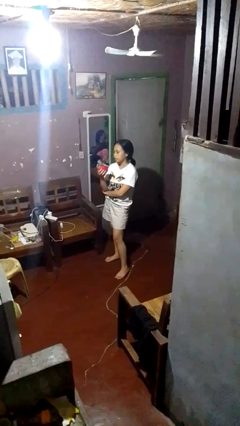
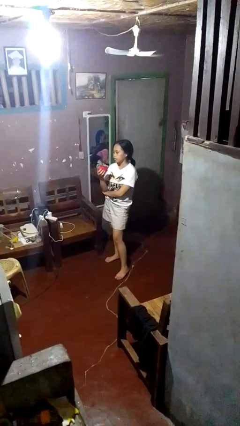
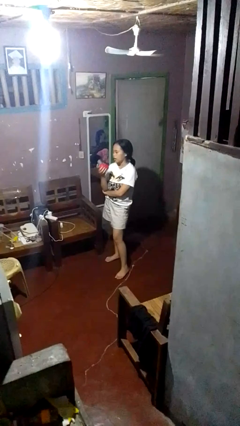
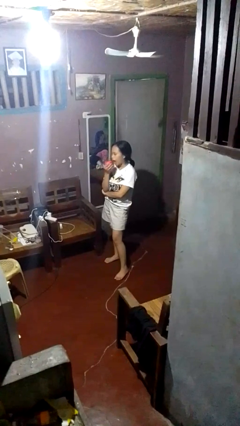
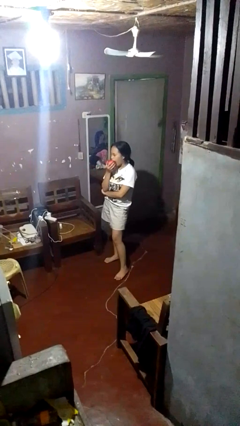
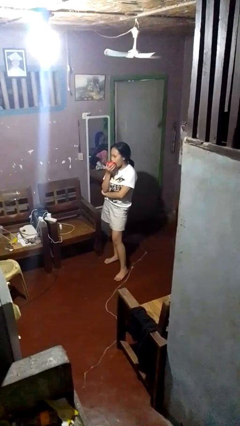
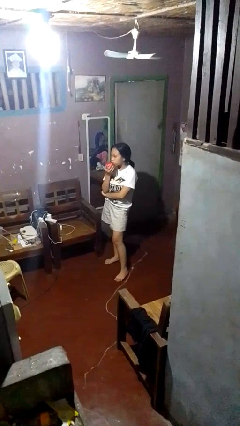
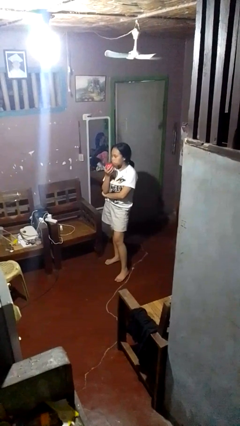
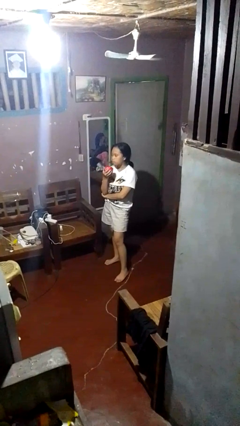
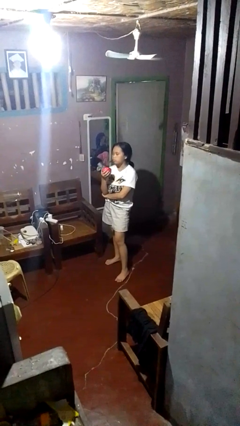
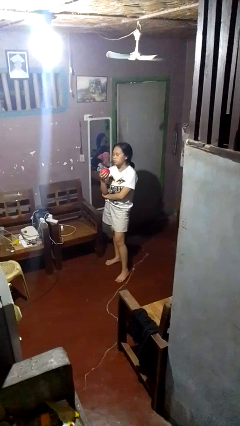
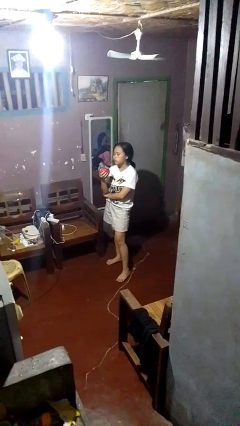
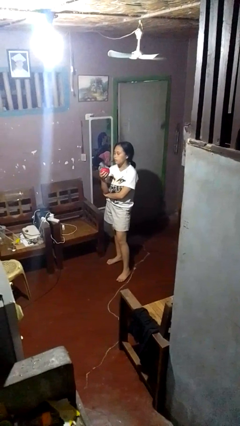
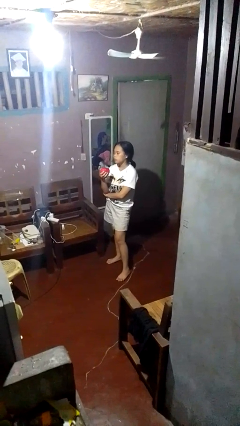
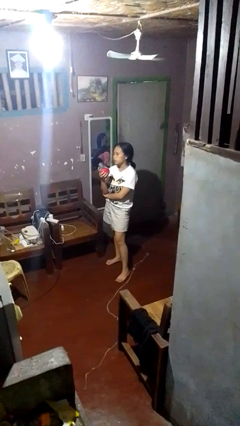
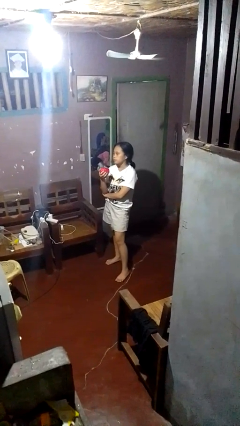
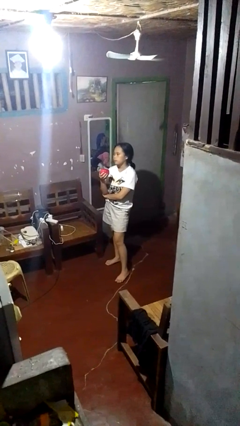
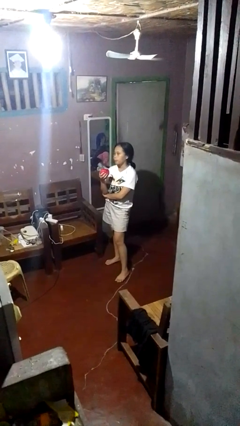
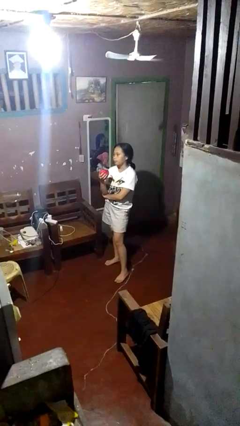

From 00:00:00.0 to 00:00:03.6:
person eats apple

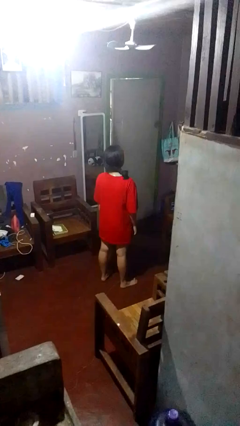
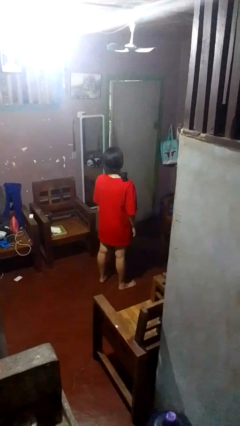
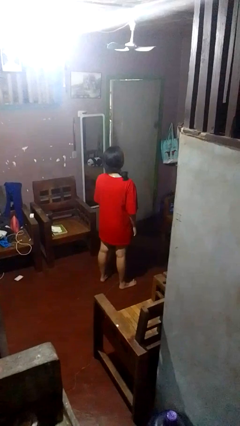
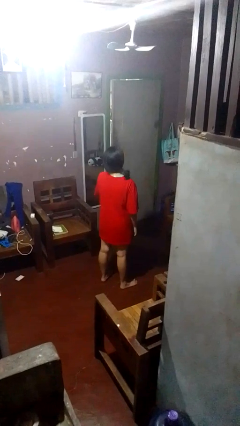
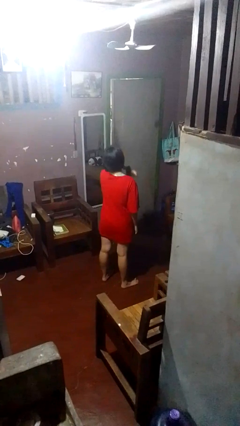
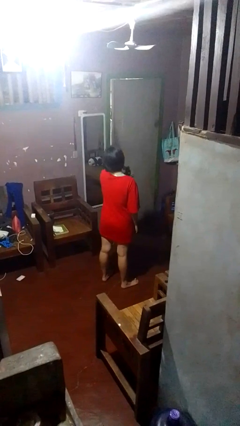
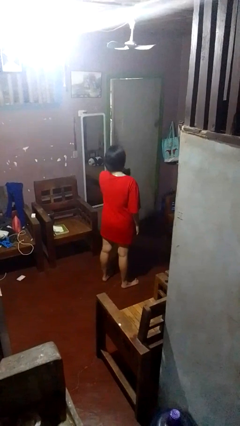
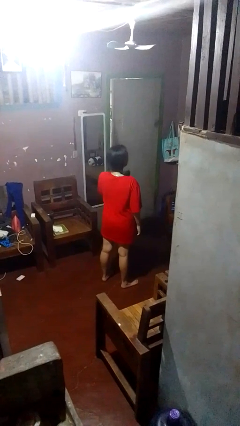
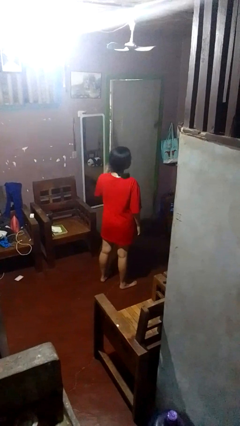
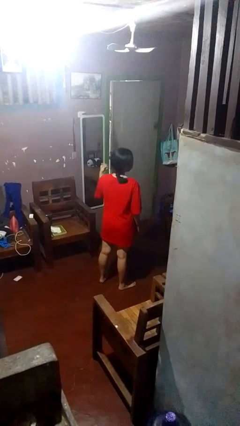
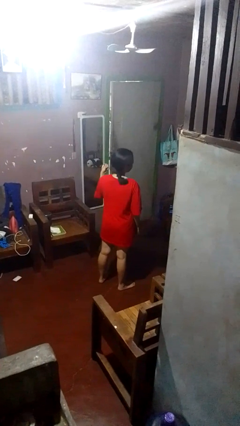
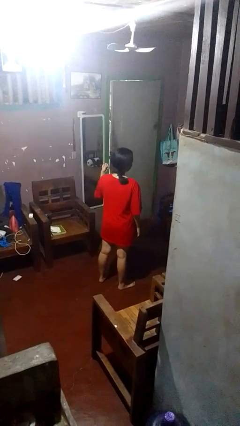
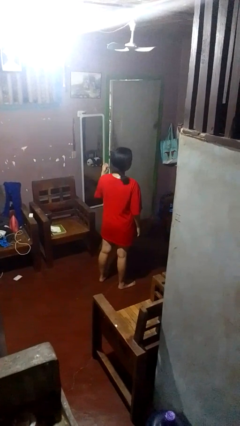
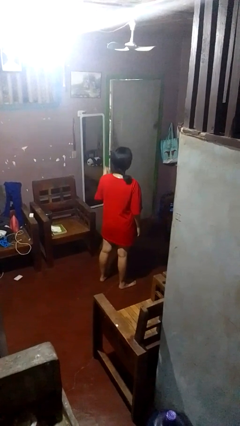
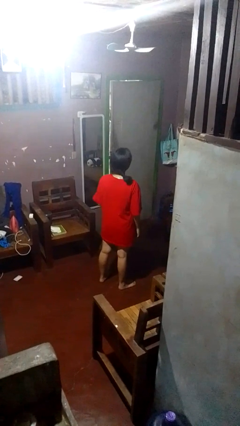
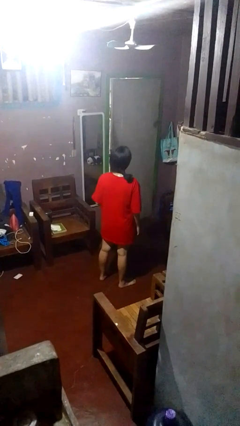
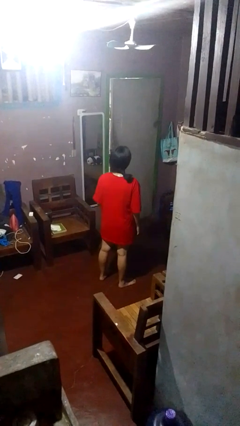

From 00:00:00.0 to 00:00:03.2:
person gestures cut

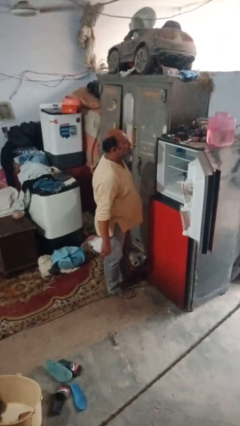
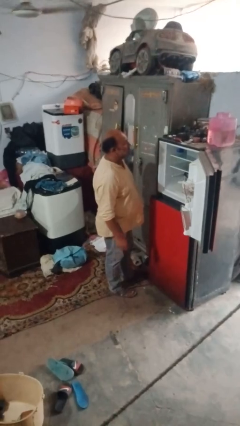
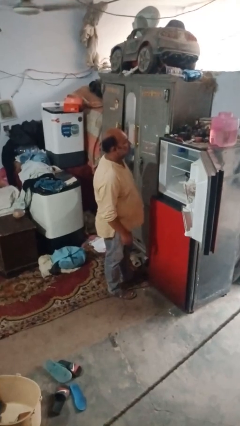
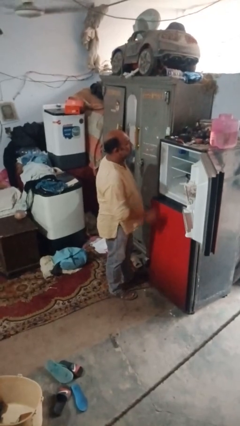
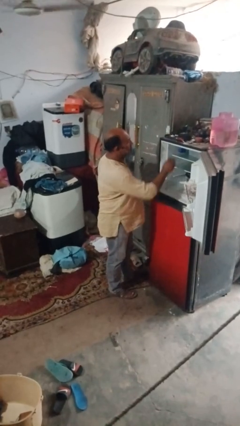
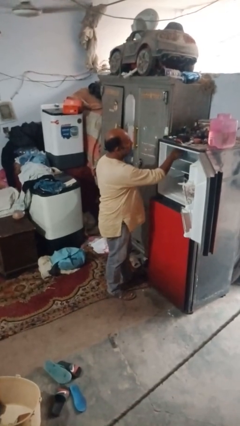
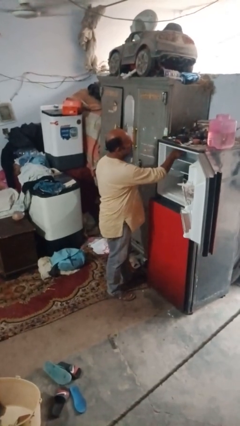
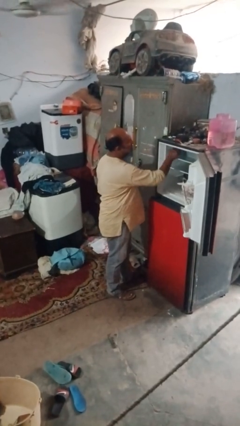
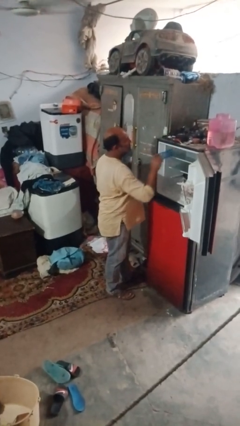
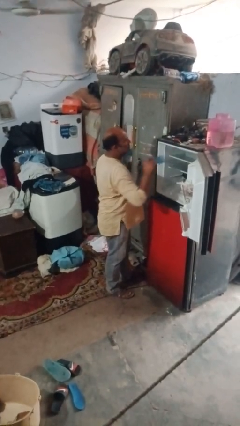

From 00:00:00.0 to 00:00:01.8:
person takes object from refrigerator

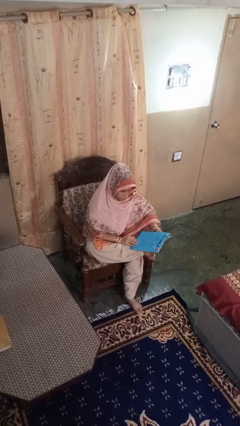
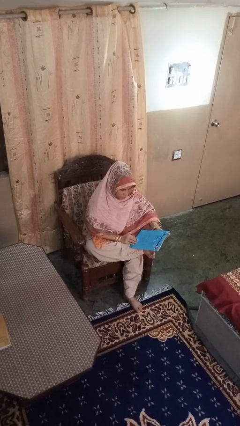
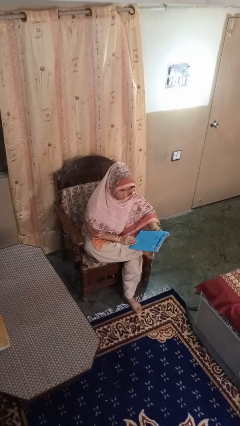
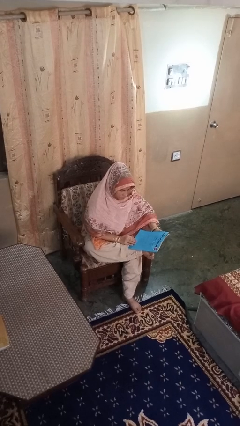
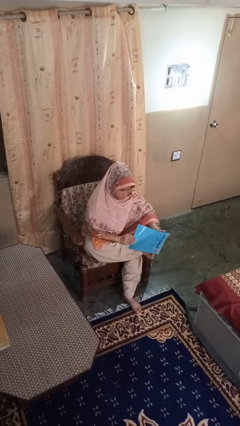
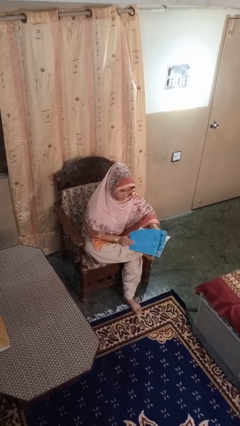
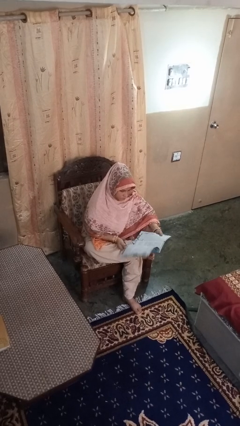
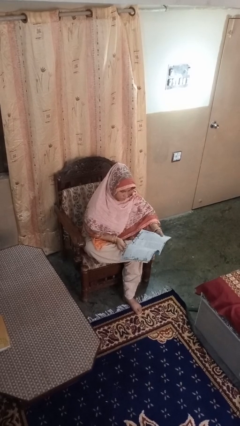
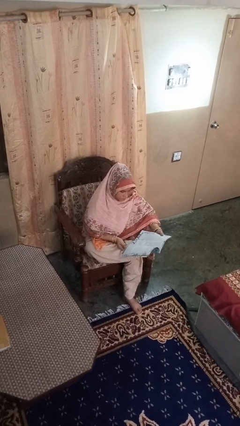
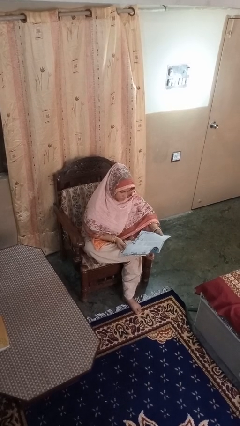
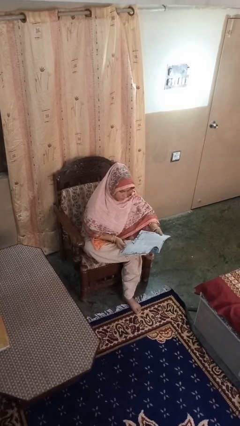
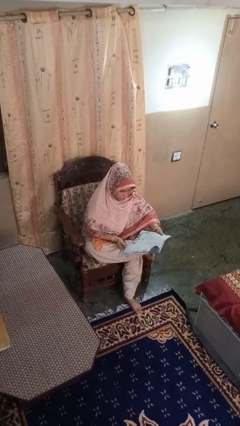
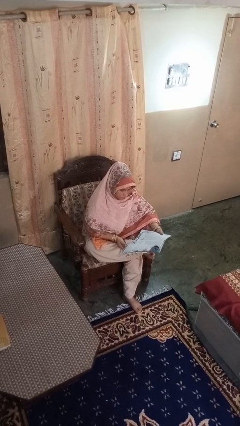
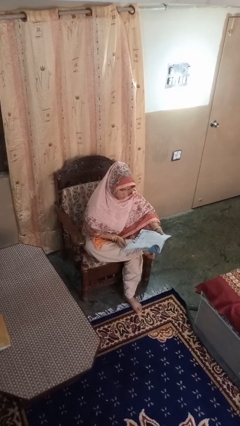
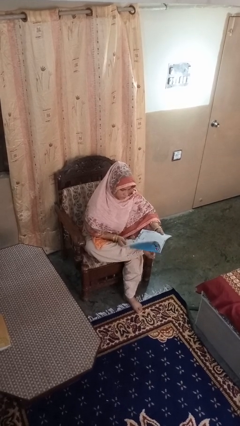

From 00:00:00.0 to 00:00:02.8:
person reads magazine

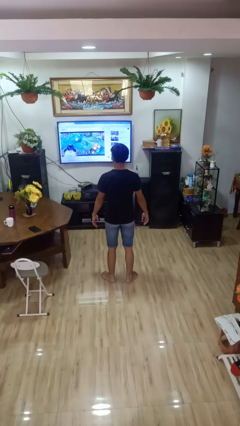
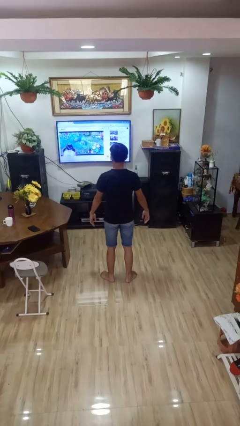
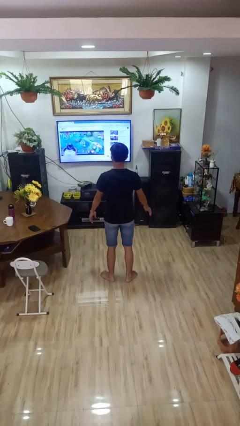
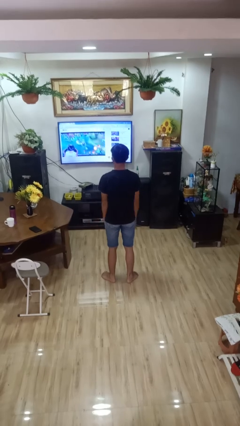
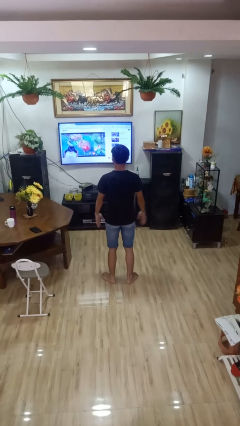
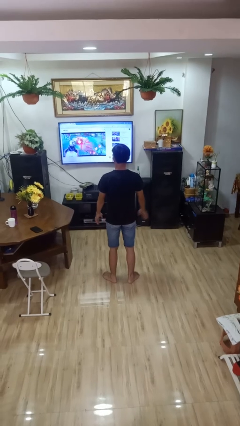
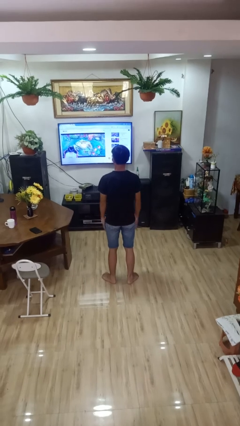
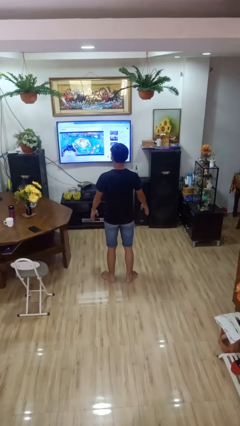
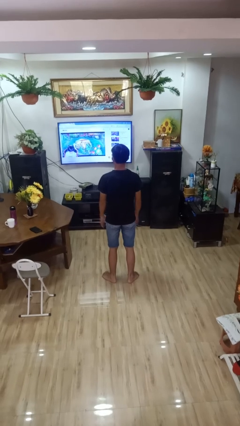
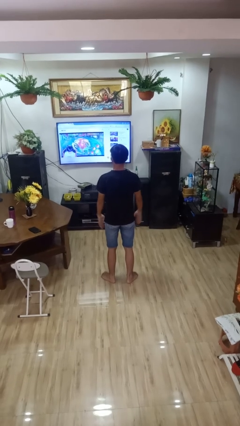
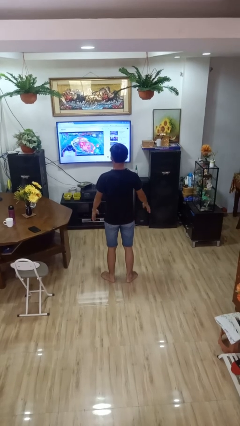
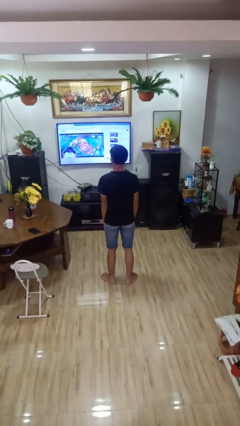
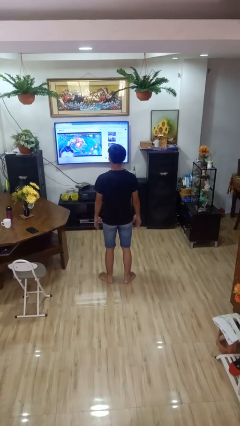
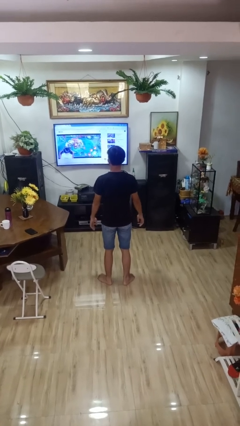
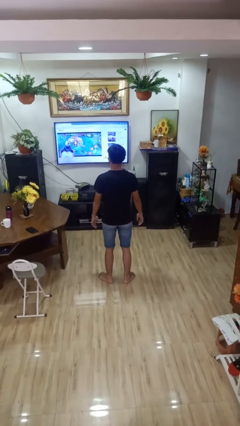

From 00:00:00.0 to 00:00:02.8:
person slaps hands on thighs

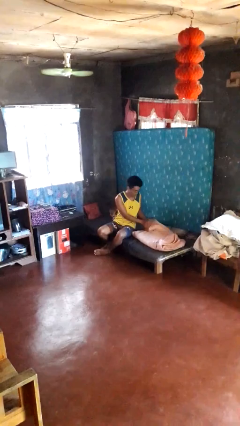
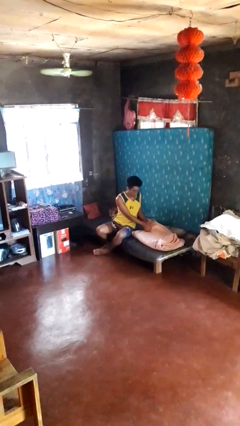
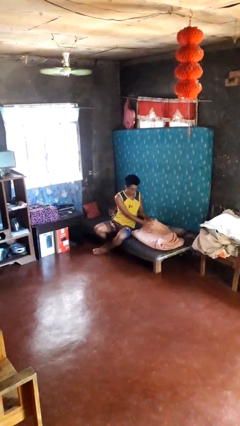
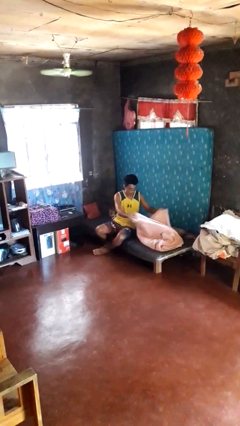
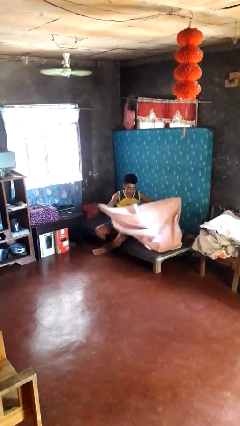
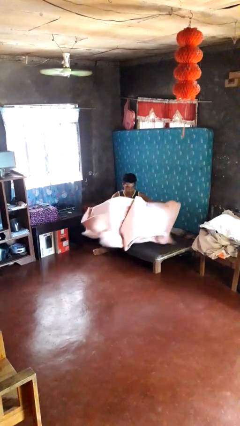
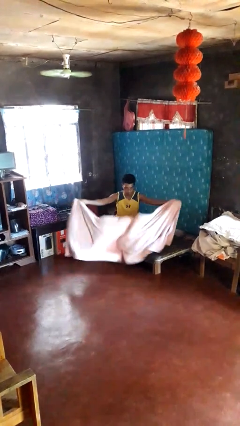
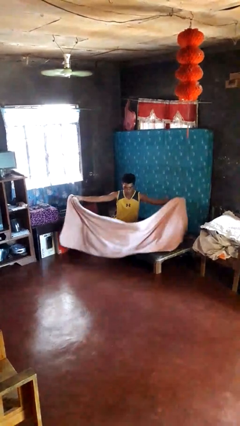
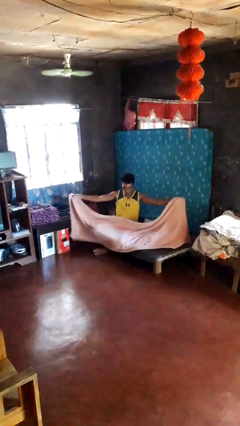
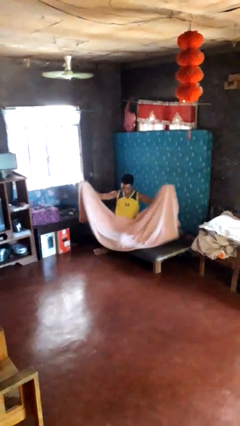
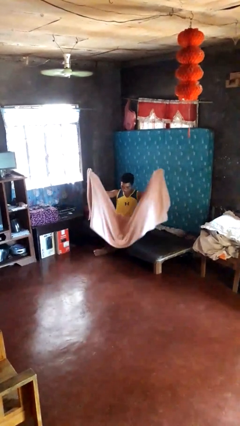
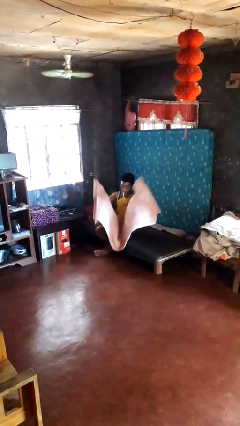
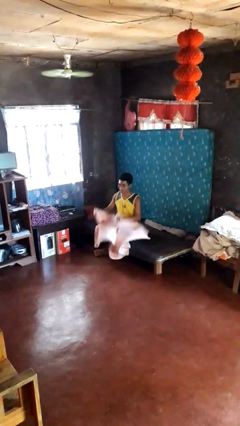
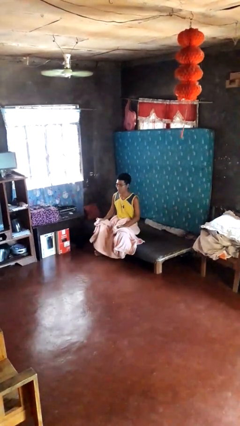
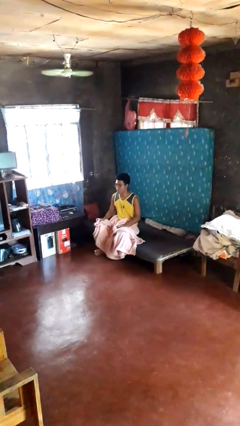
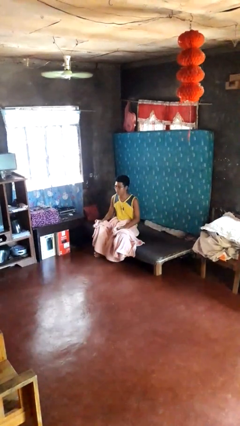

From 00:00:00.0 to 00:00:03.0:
person unfolds blanket
